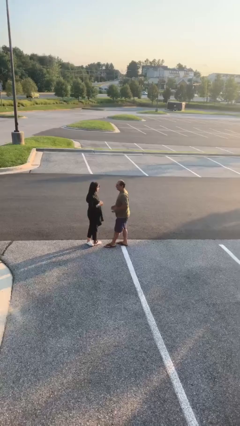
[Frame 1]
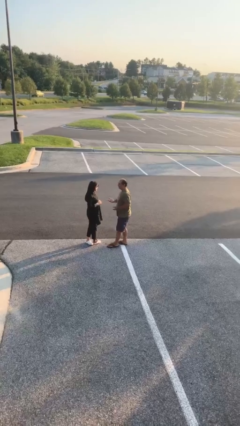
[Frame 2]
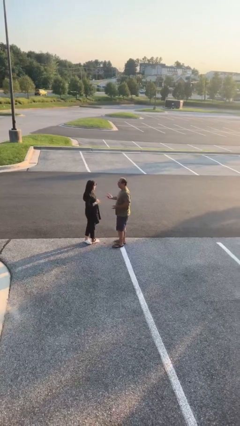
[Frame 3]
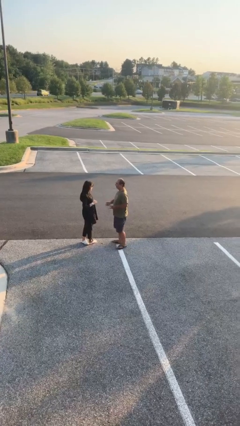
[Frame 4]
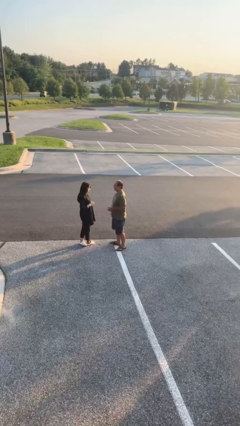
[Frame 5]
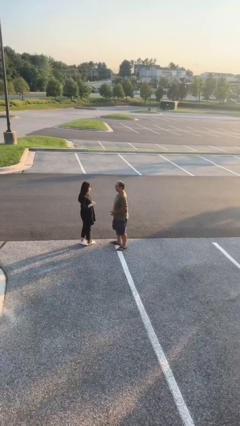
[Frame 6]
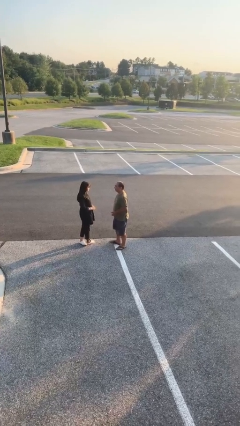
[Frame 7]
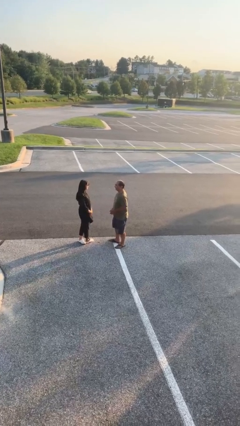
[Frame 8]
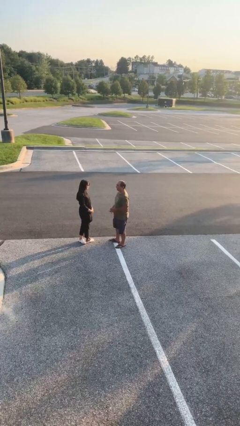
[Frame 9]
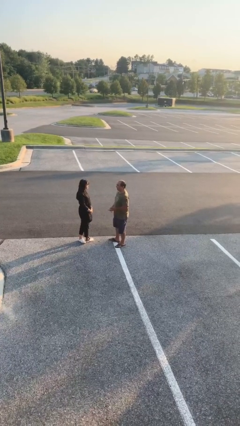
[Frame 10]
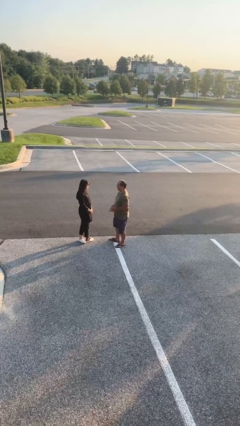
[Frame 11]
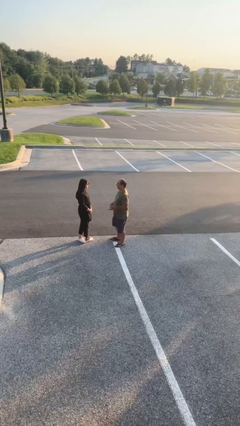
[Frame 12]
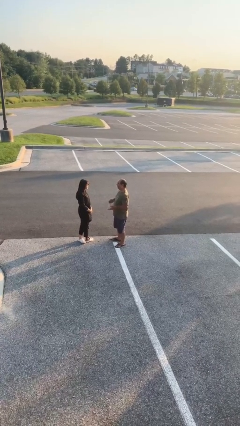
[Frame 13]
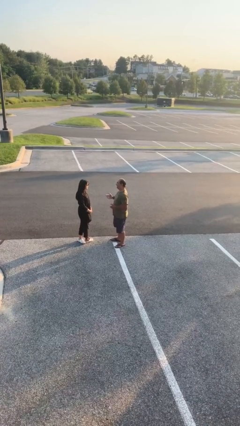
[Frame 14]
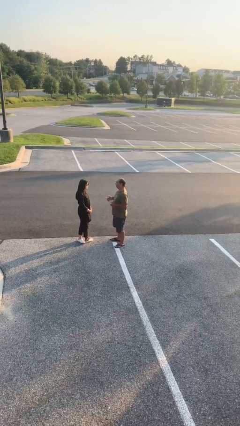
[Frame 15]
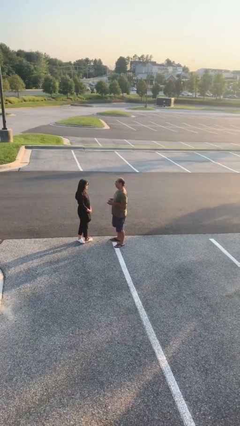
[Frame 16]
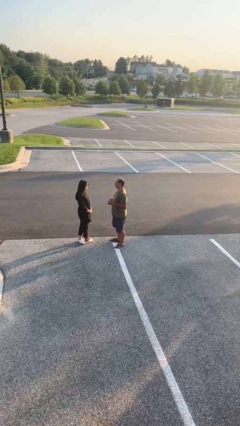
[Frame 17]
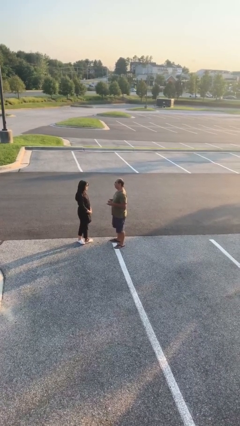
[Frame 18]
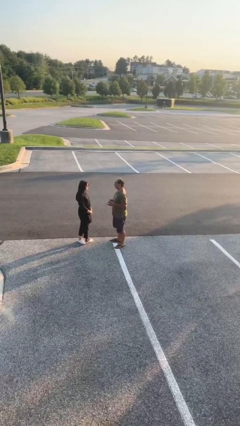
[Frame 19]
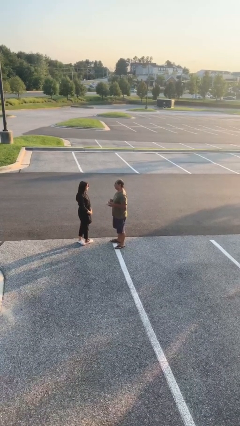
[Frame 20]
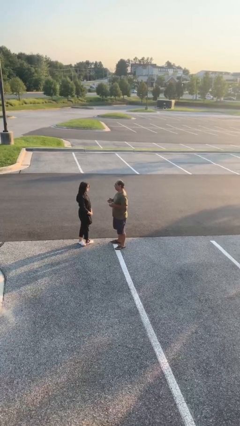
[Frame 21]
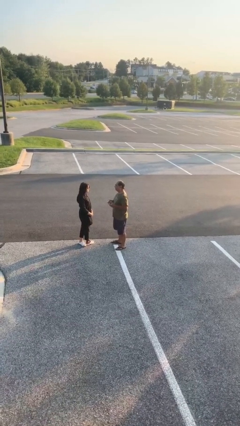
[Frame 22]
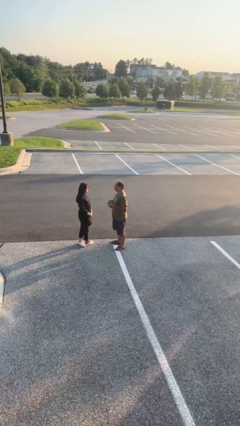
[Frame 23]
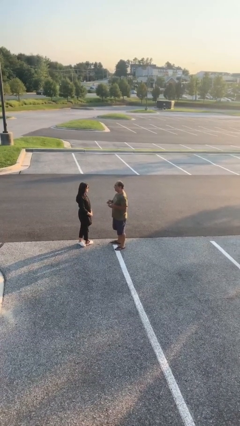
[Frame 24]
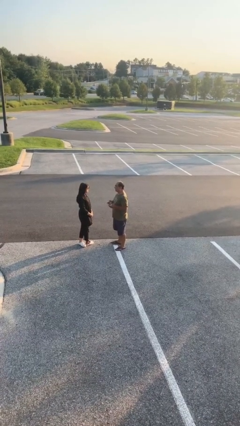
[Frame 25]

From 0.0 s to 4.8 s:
person talks to person

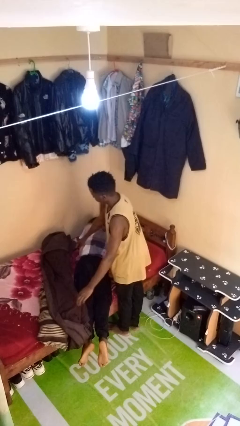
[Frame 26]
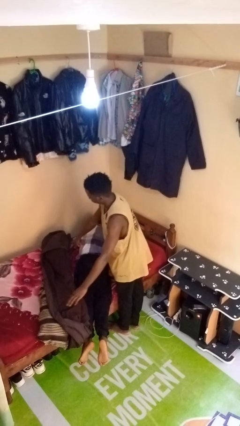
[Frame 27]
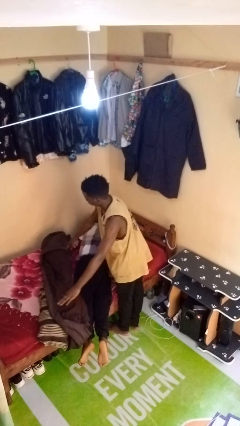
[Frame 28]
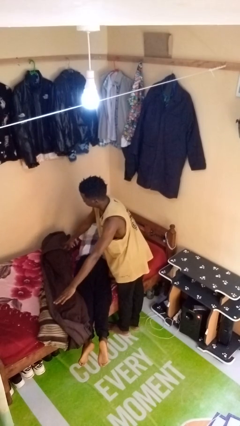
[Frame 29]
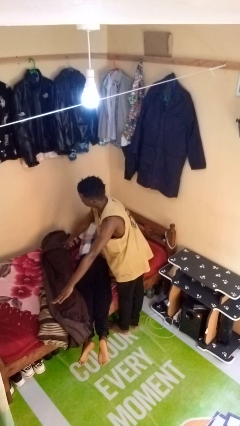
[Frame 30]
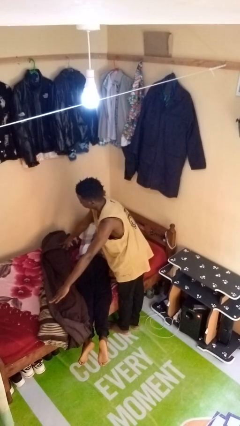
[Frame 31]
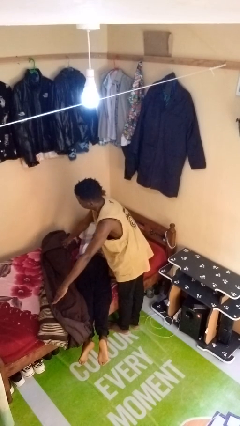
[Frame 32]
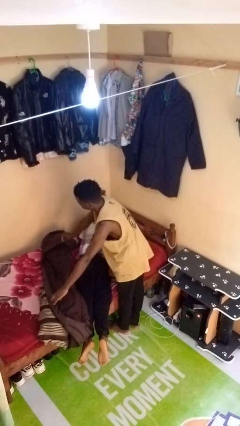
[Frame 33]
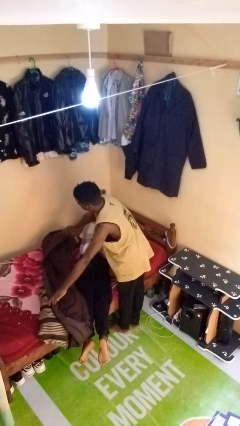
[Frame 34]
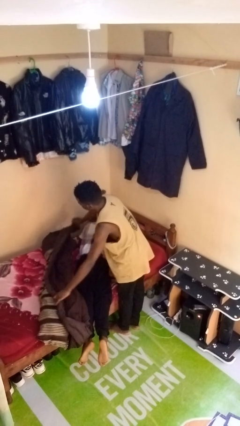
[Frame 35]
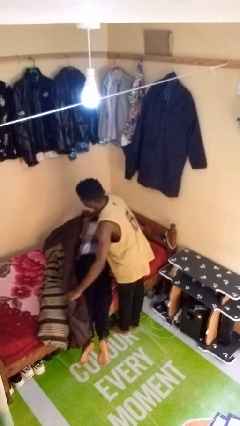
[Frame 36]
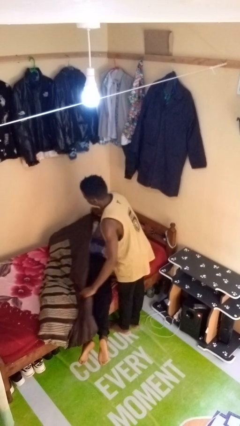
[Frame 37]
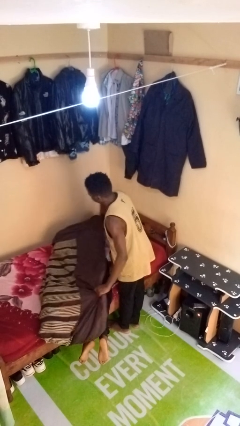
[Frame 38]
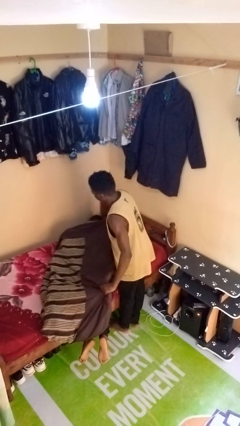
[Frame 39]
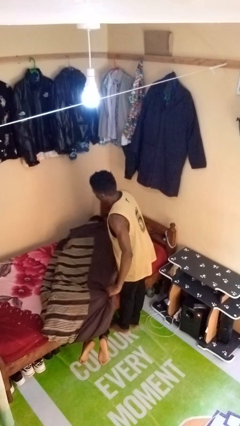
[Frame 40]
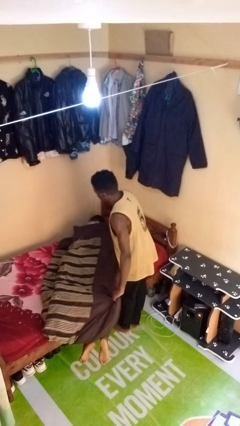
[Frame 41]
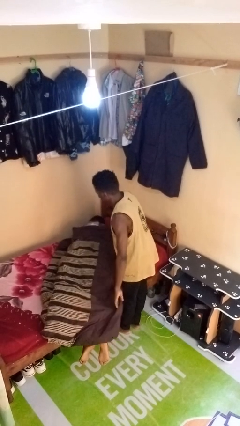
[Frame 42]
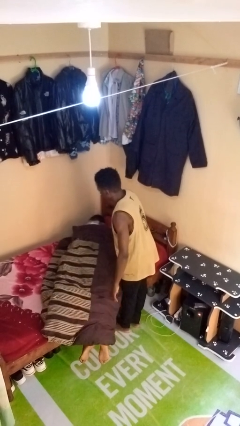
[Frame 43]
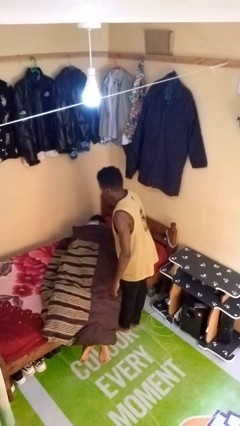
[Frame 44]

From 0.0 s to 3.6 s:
person covers friend with blanket

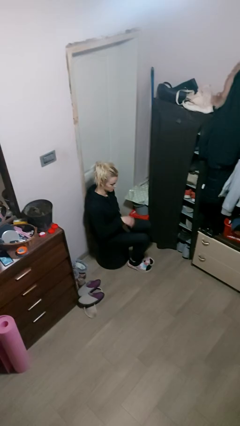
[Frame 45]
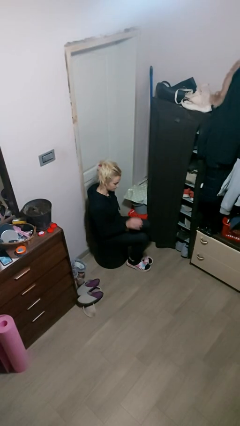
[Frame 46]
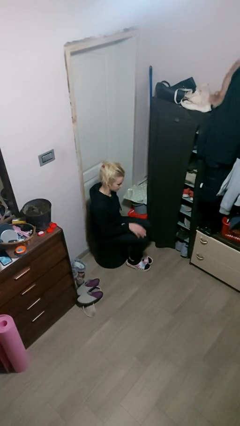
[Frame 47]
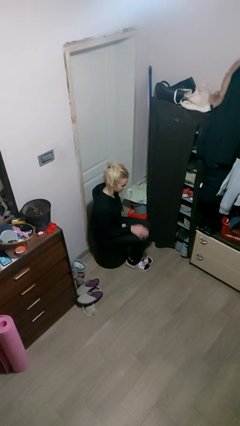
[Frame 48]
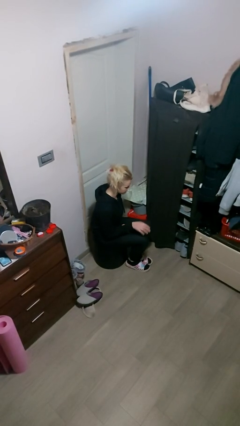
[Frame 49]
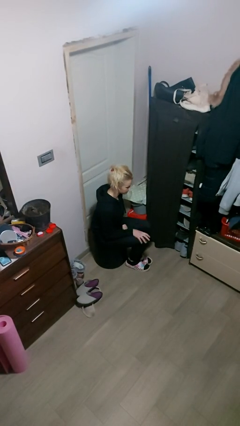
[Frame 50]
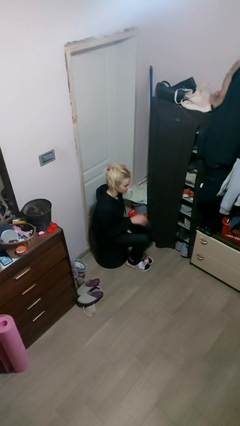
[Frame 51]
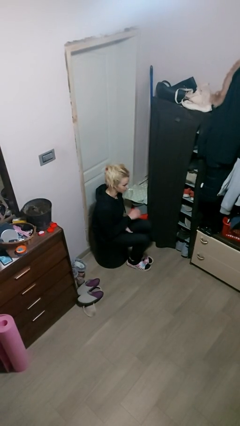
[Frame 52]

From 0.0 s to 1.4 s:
person slaps hands on thighs

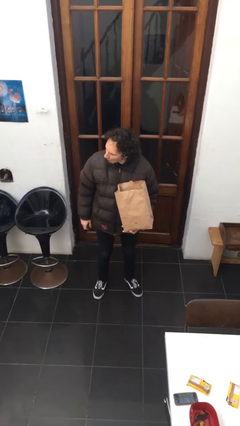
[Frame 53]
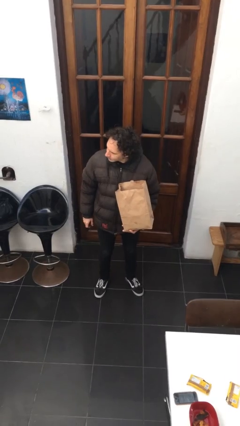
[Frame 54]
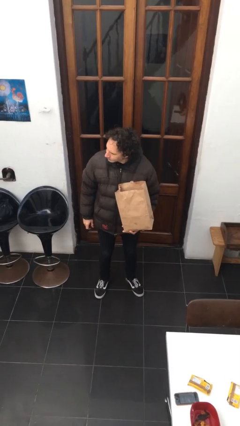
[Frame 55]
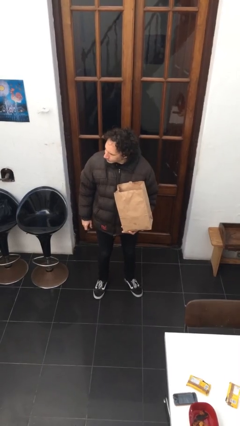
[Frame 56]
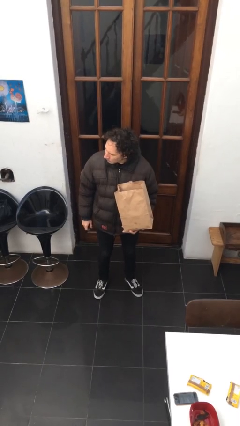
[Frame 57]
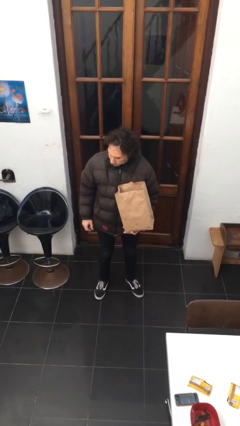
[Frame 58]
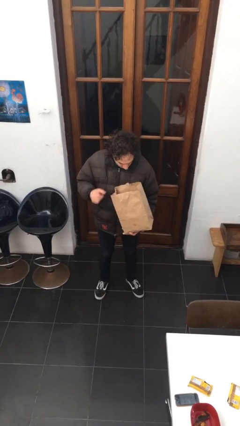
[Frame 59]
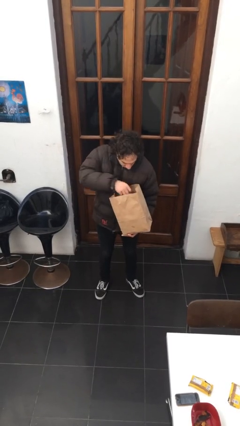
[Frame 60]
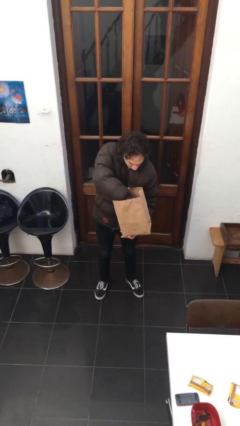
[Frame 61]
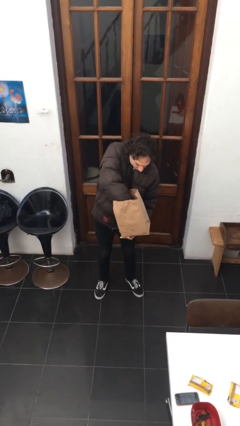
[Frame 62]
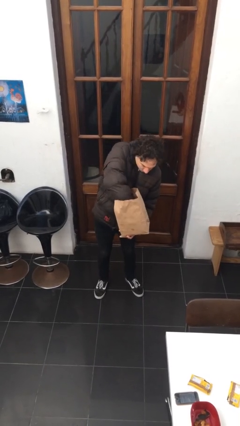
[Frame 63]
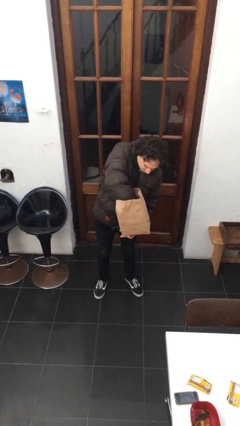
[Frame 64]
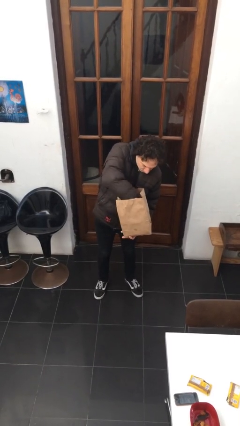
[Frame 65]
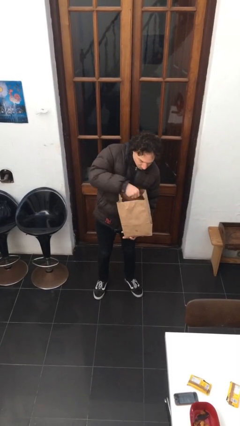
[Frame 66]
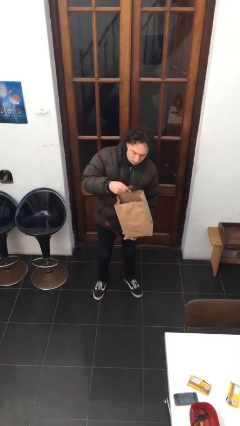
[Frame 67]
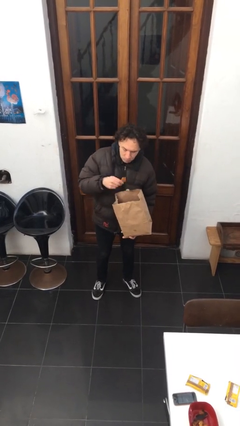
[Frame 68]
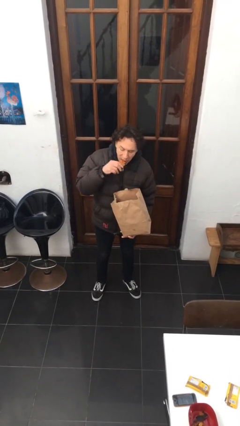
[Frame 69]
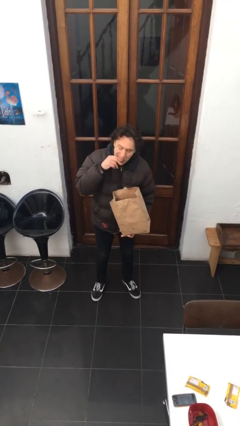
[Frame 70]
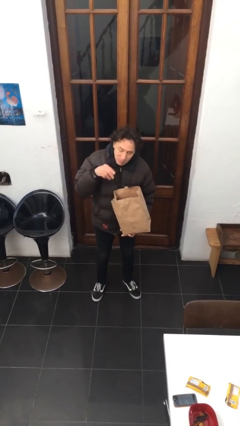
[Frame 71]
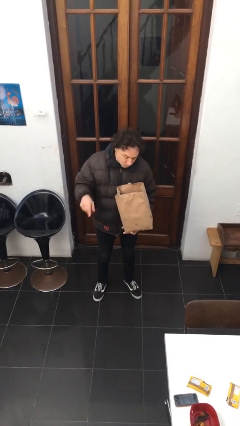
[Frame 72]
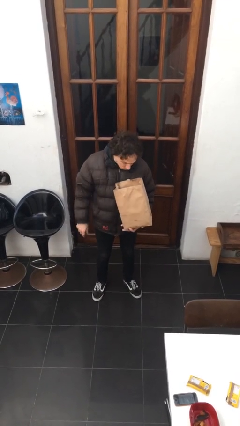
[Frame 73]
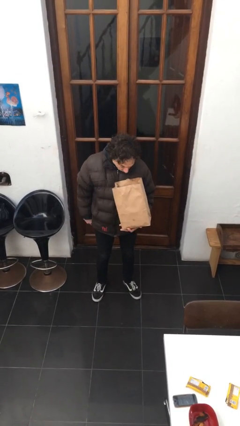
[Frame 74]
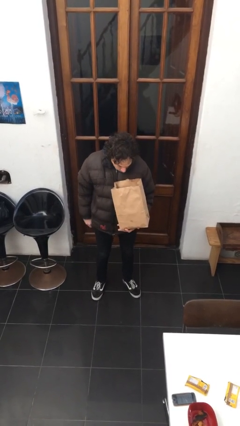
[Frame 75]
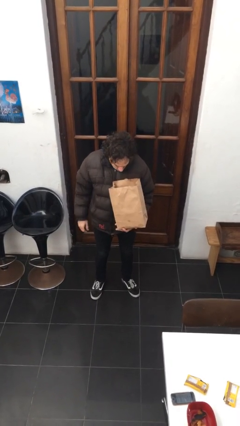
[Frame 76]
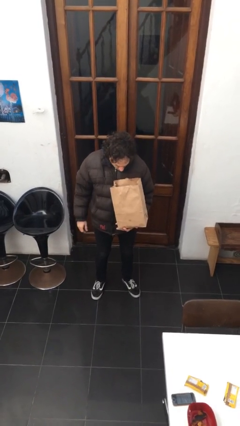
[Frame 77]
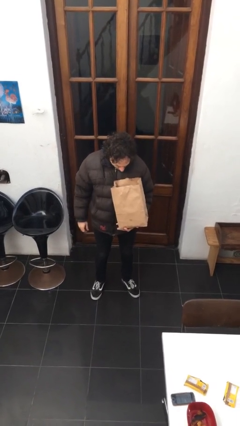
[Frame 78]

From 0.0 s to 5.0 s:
person eats snack from bag

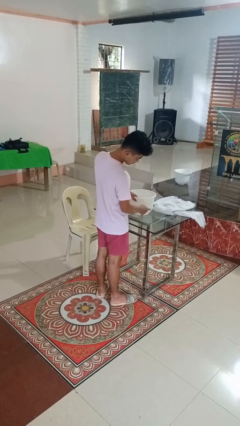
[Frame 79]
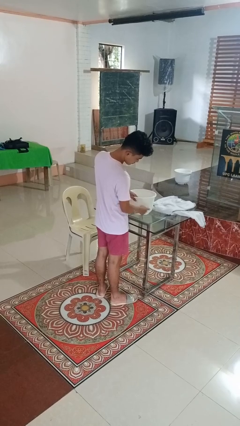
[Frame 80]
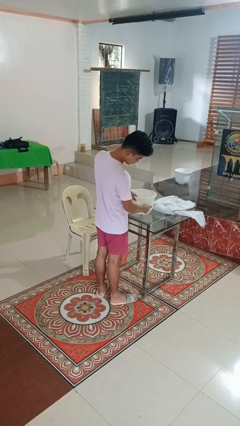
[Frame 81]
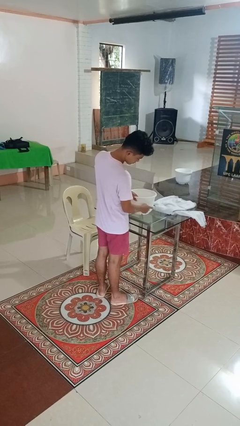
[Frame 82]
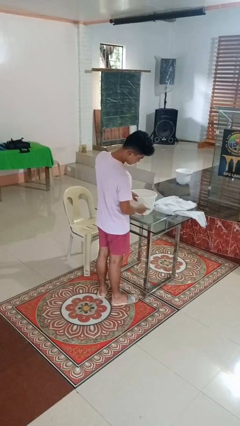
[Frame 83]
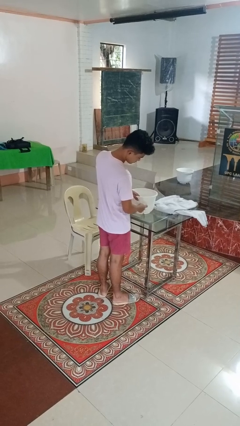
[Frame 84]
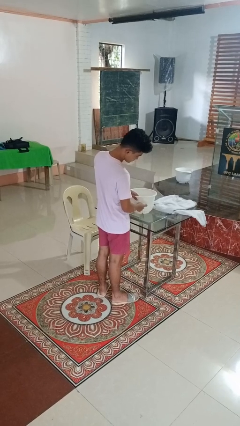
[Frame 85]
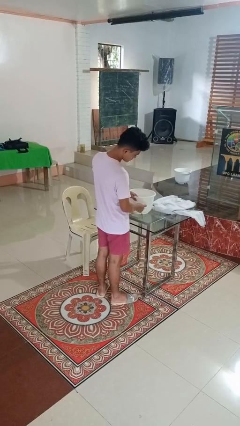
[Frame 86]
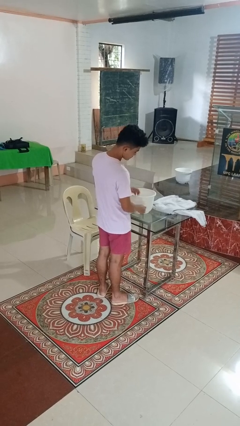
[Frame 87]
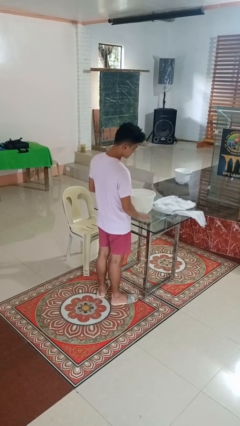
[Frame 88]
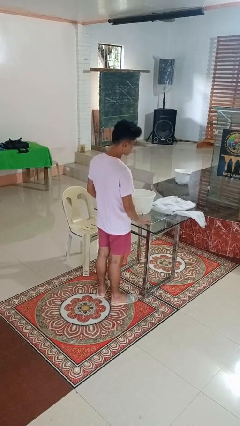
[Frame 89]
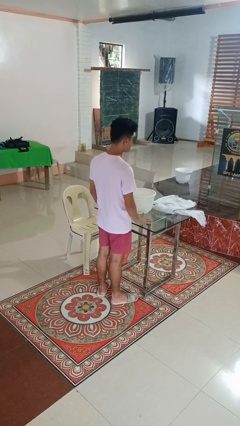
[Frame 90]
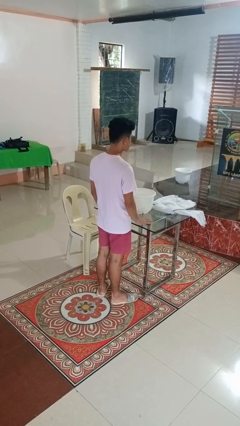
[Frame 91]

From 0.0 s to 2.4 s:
person taps object with finger

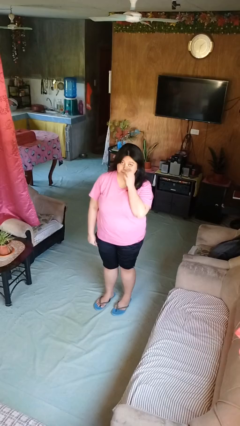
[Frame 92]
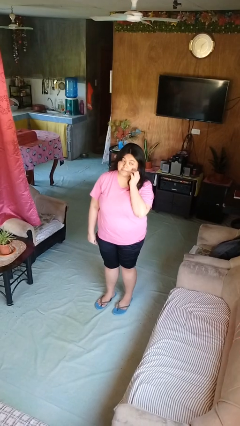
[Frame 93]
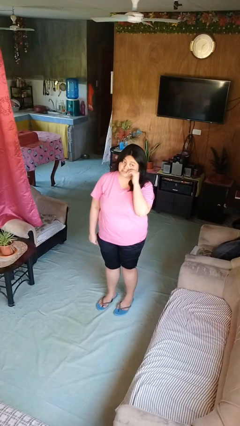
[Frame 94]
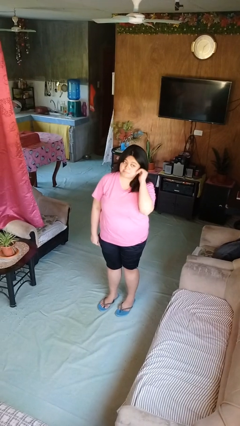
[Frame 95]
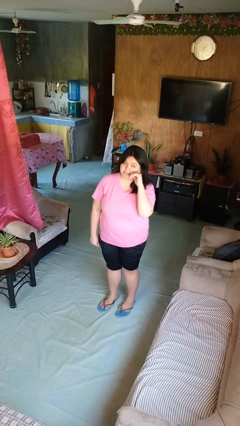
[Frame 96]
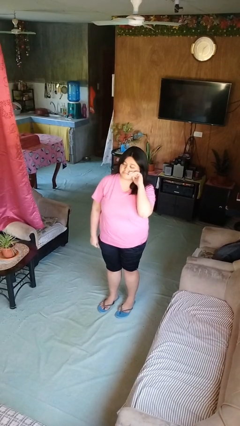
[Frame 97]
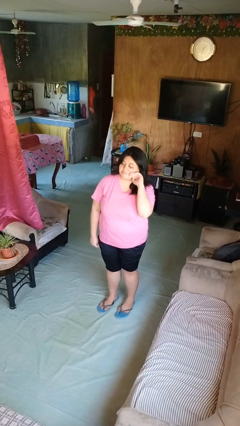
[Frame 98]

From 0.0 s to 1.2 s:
person scratches face
